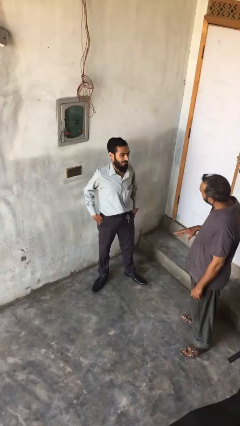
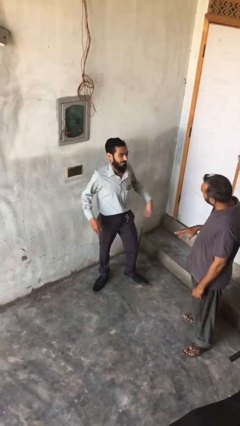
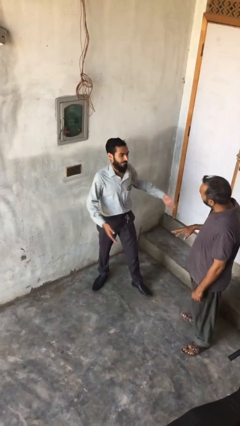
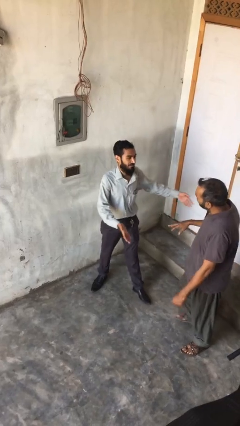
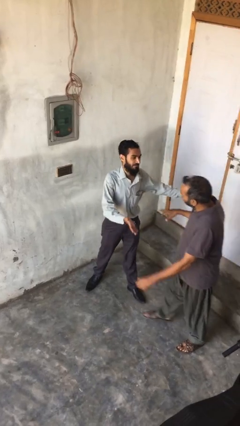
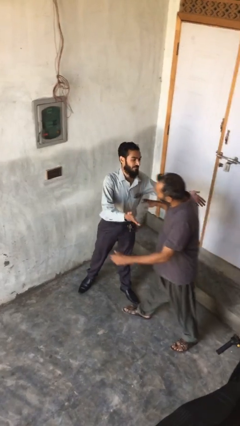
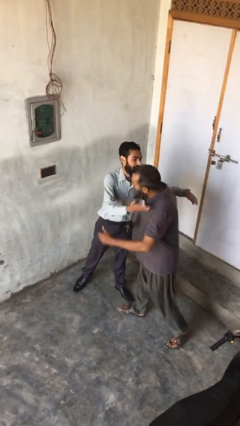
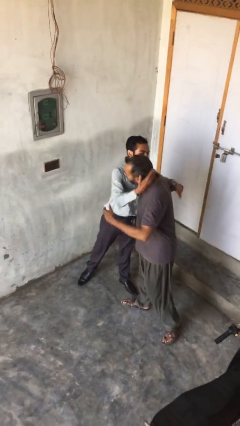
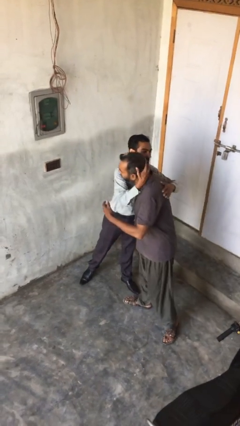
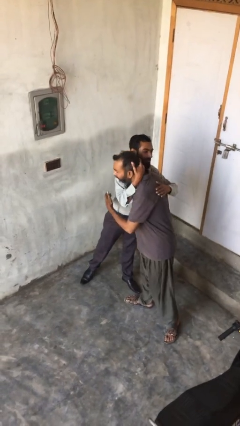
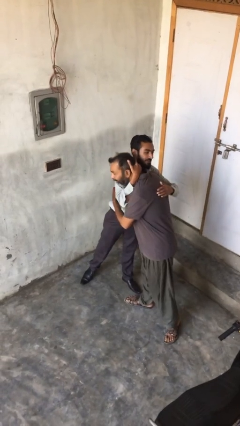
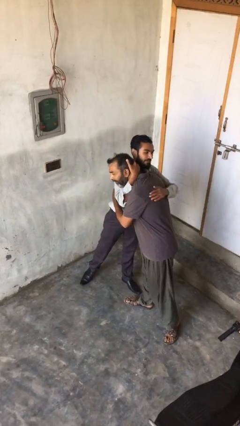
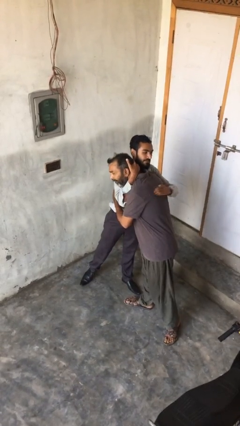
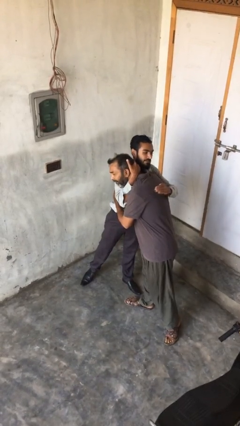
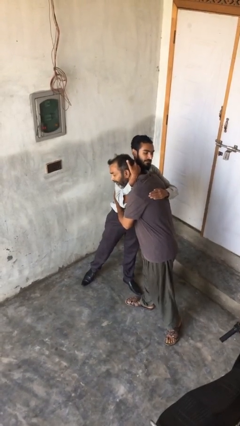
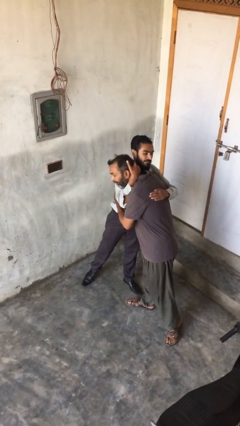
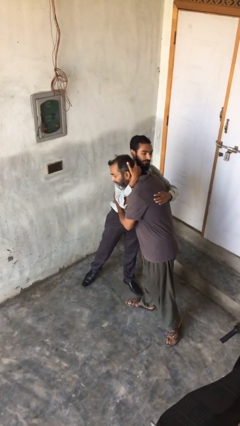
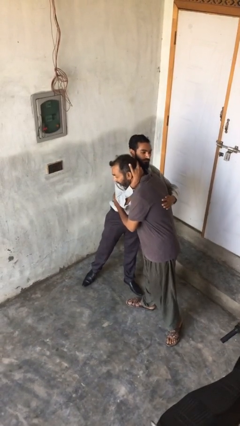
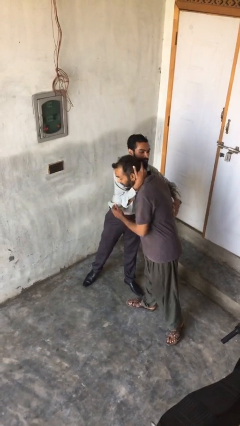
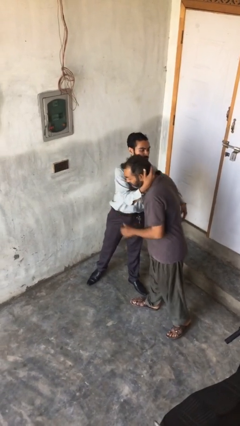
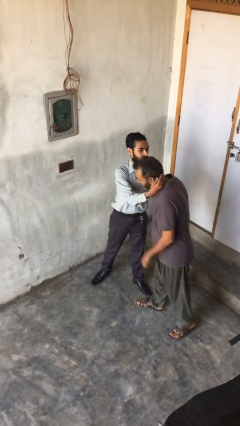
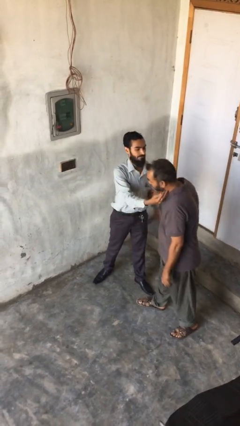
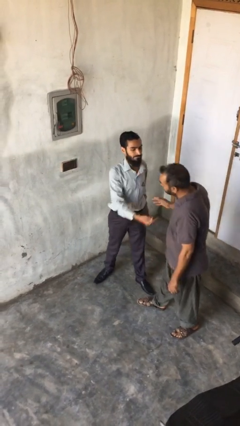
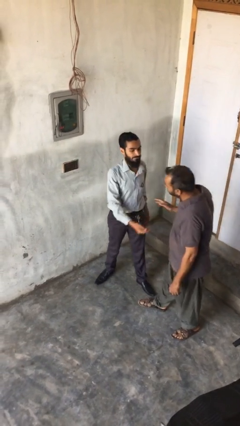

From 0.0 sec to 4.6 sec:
person embraces person

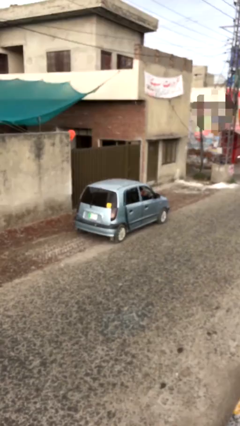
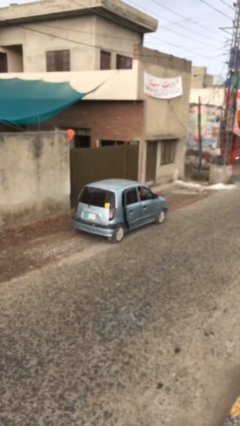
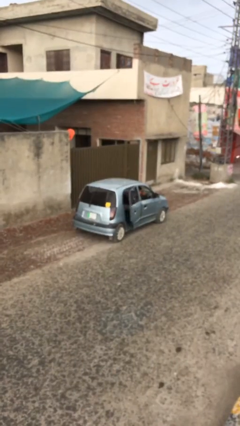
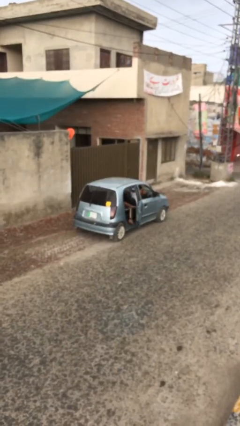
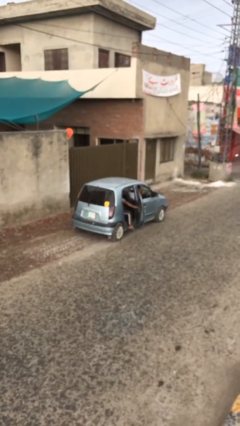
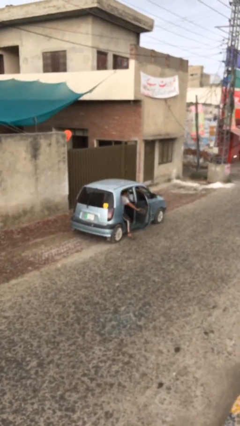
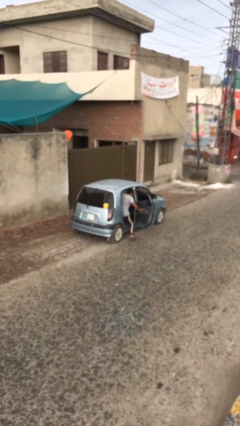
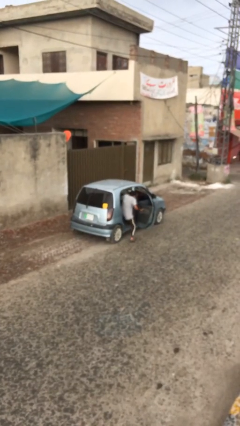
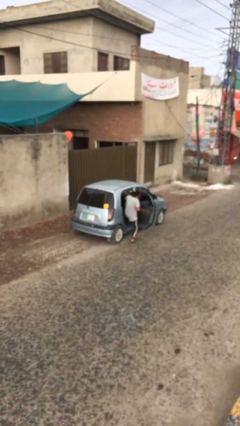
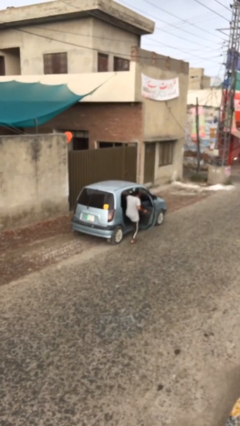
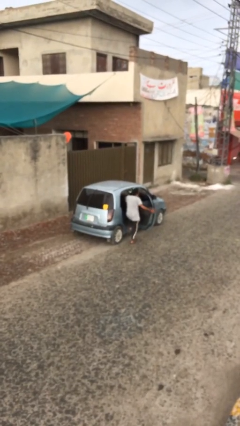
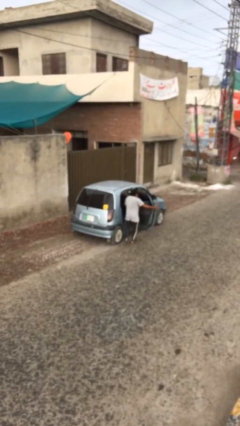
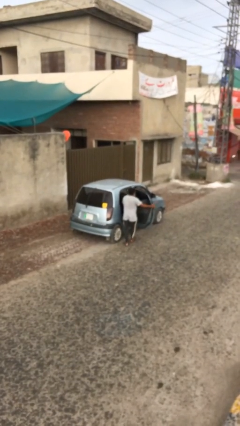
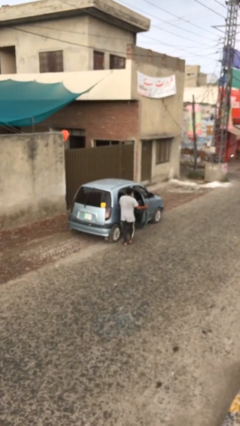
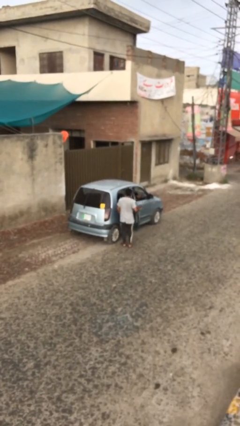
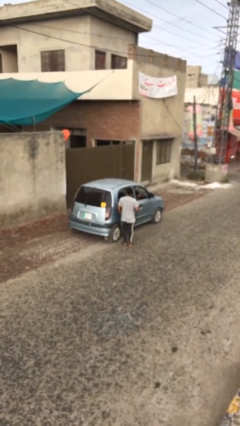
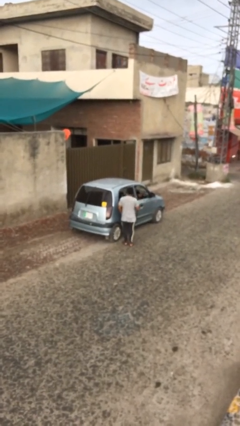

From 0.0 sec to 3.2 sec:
car drops off person

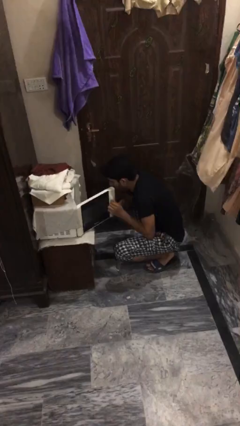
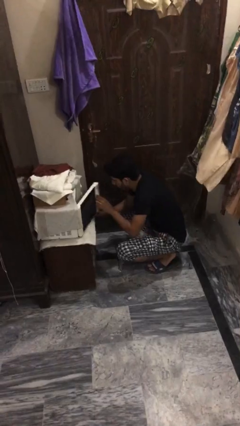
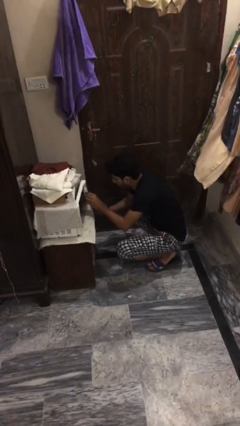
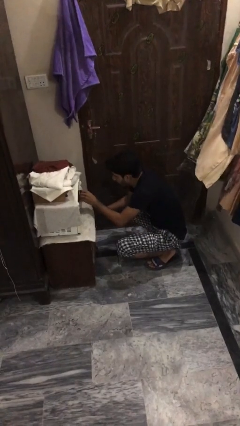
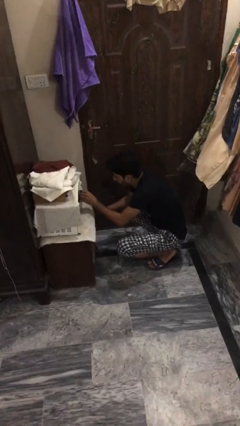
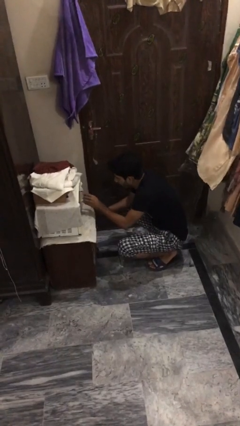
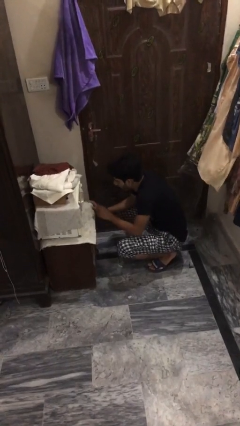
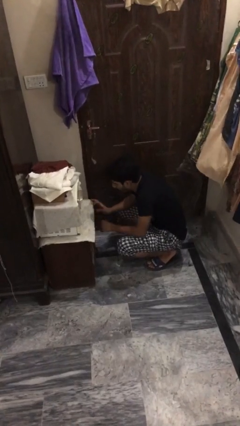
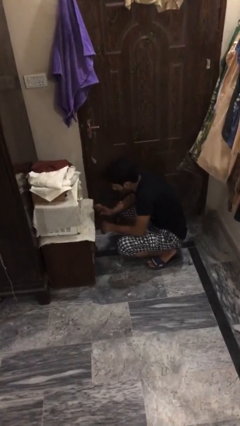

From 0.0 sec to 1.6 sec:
person closes oven door

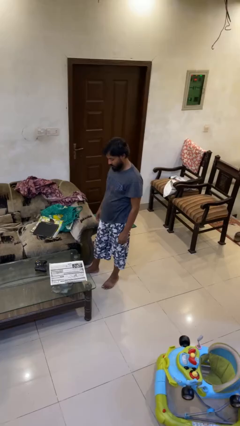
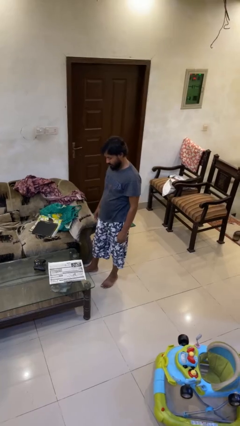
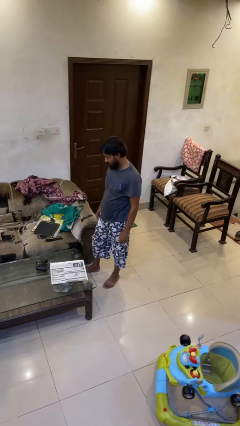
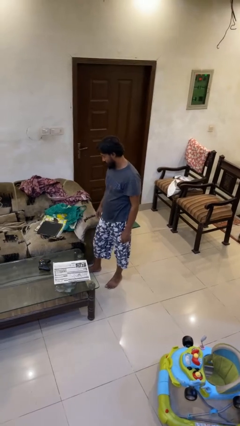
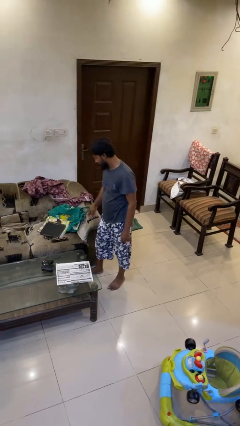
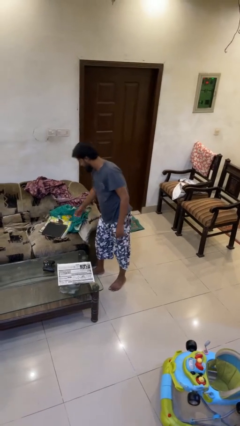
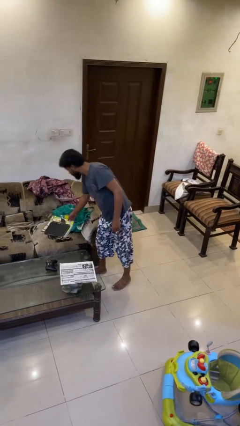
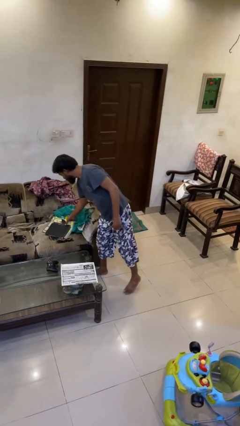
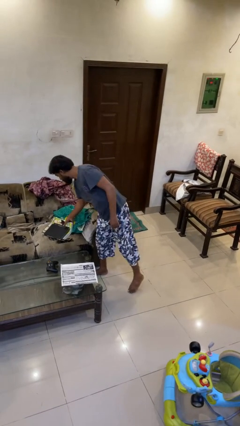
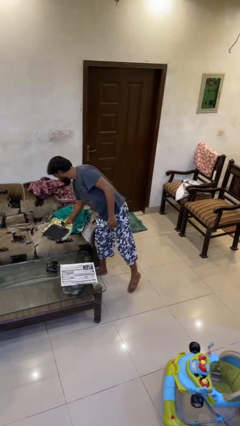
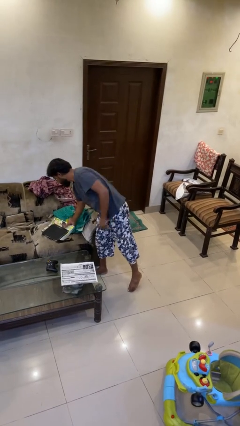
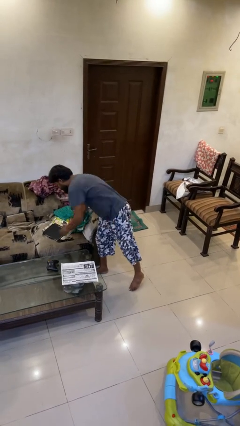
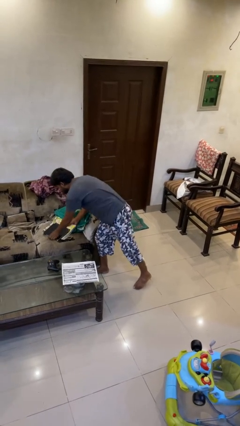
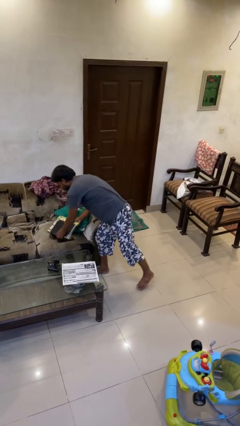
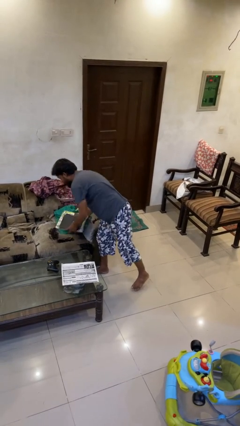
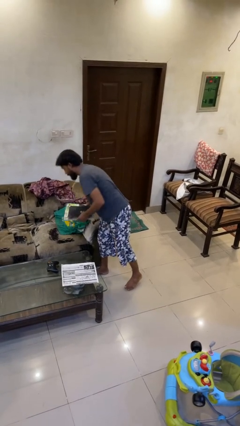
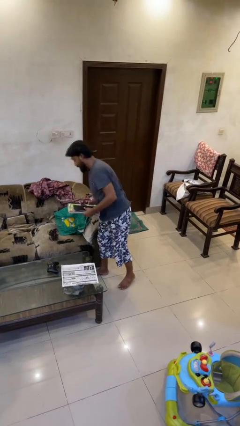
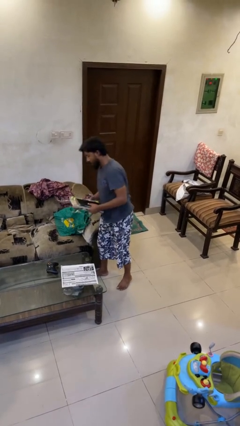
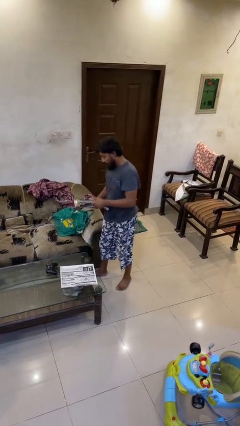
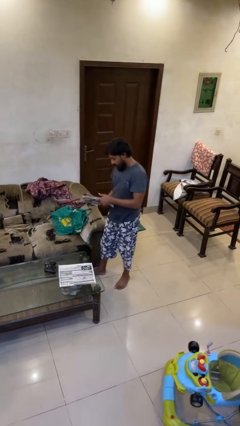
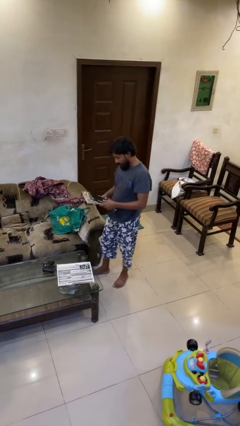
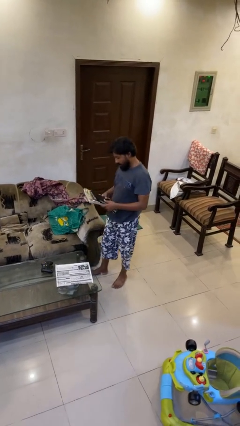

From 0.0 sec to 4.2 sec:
person picks up object from couch

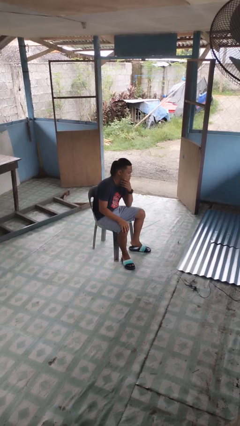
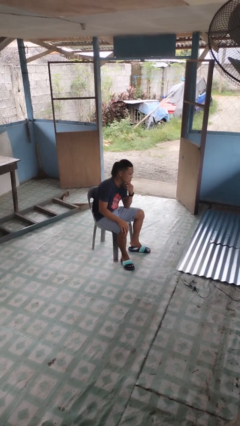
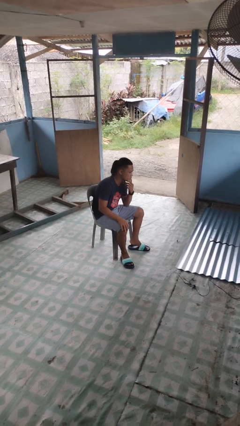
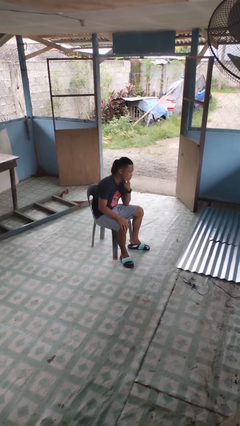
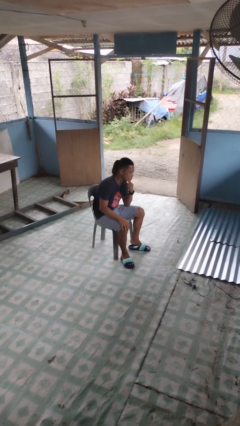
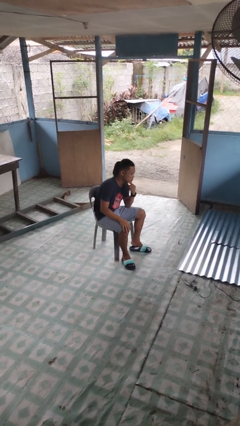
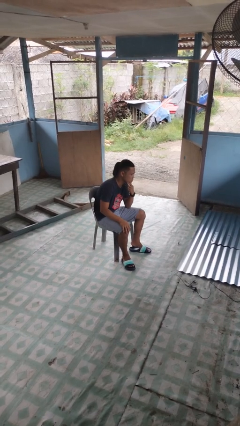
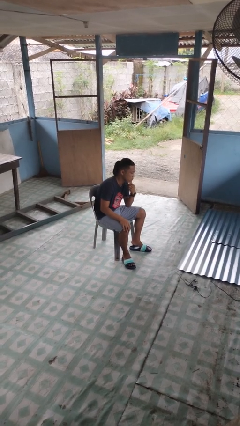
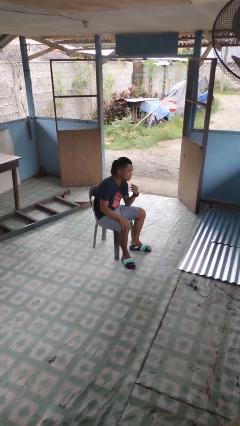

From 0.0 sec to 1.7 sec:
person strokes chin

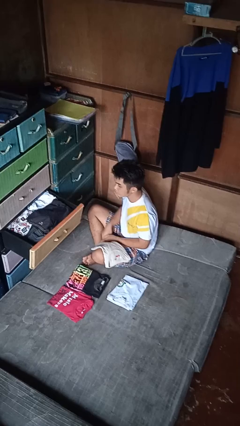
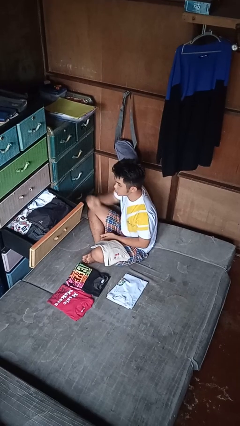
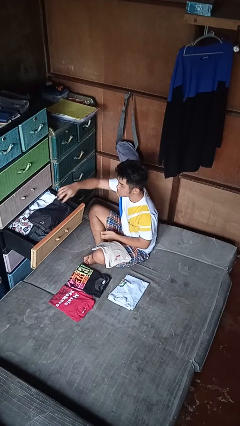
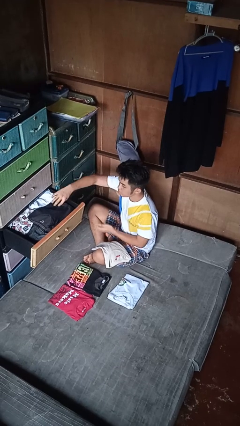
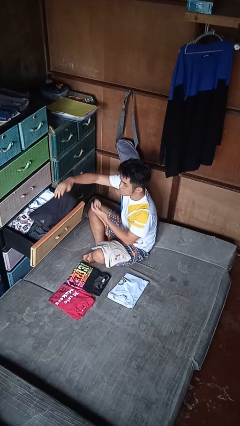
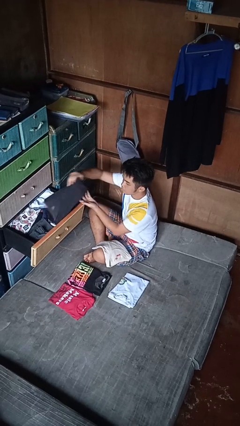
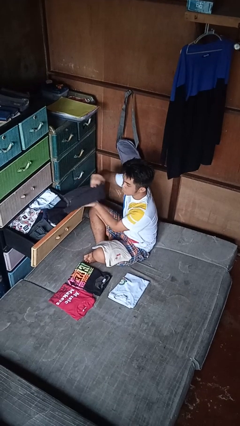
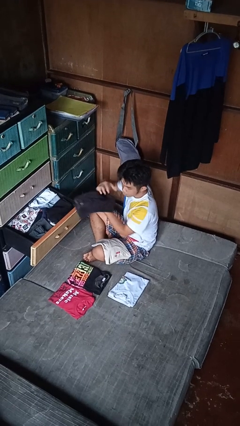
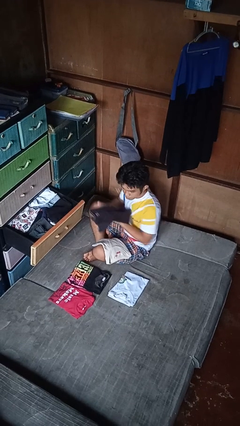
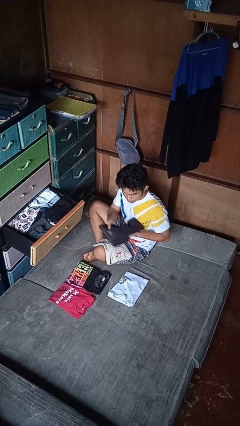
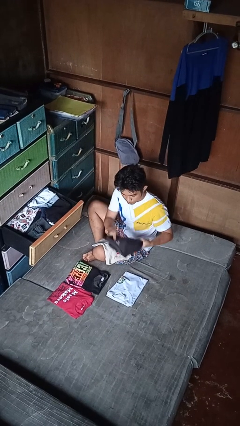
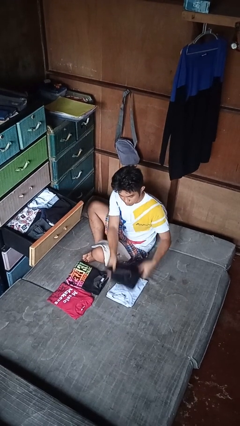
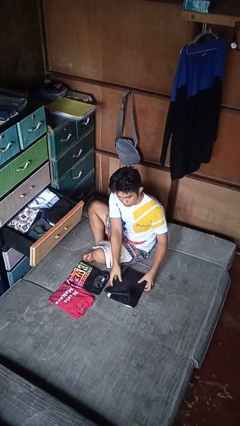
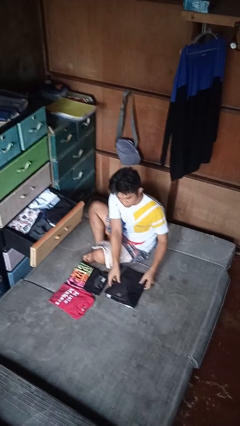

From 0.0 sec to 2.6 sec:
person takes clothes from dresser
